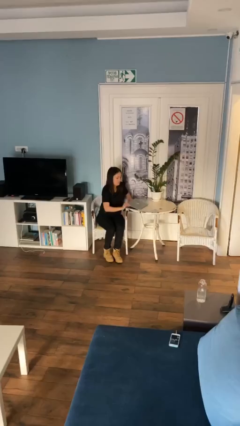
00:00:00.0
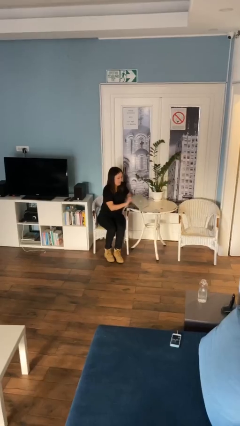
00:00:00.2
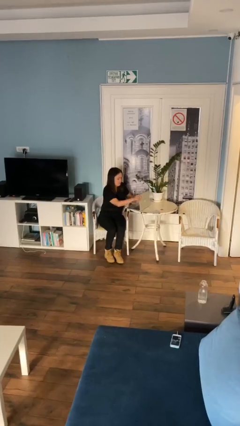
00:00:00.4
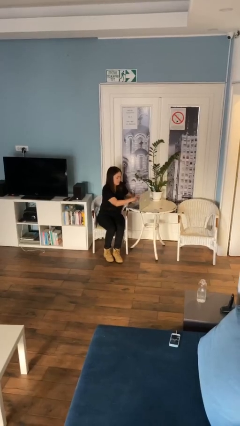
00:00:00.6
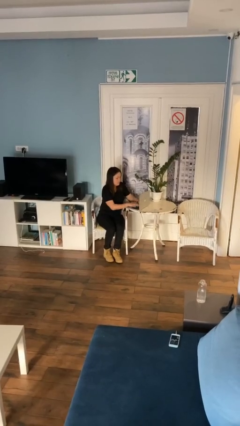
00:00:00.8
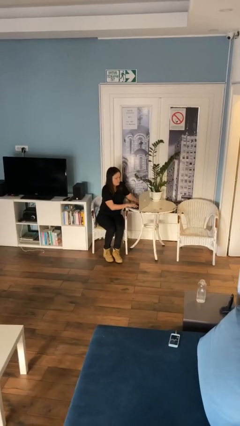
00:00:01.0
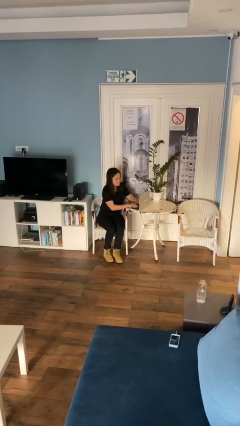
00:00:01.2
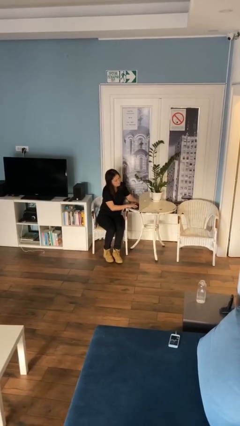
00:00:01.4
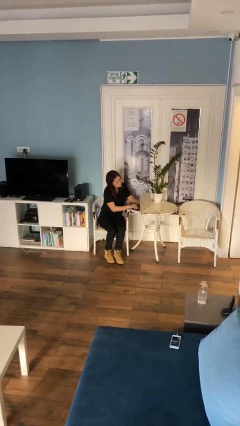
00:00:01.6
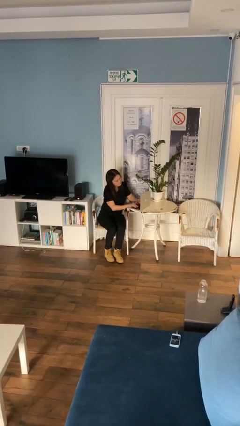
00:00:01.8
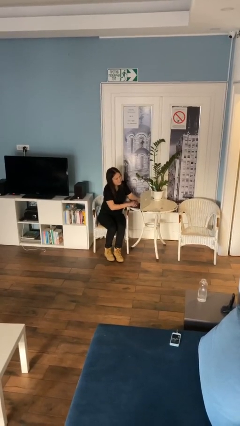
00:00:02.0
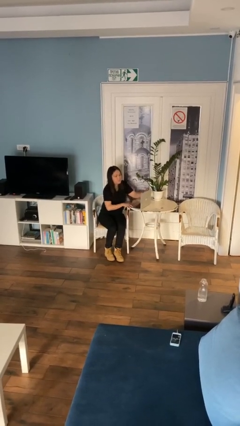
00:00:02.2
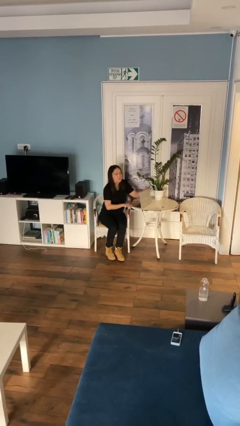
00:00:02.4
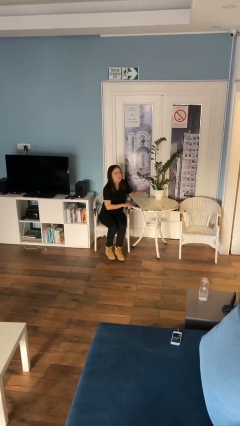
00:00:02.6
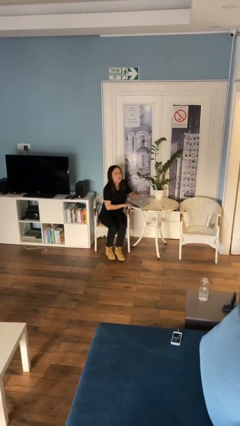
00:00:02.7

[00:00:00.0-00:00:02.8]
person interacts with laptop

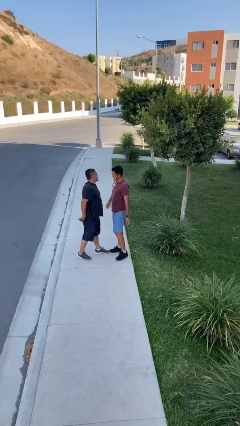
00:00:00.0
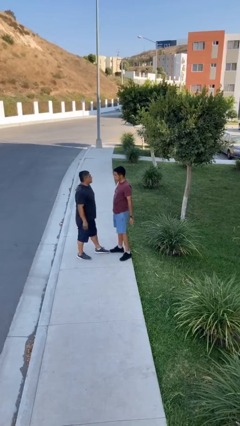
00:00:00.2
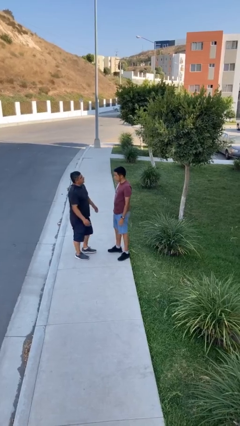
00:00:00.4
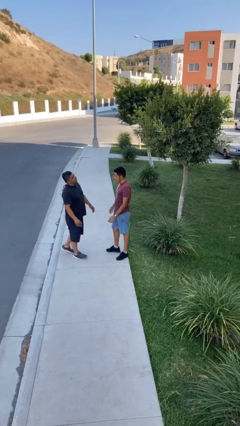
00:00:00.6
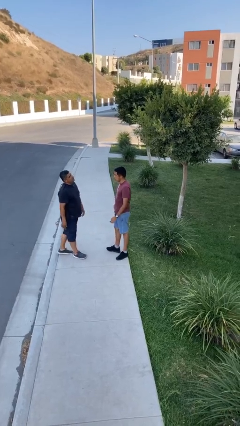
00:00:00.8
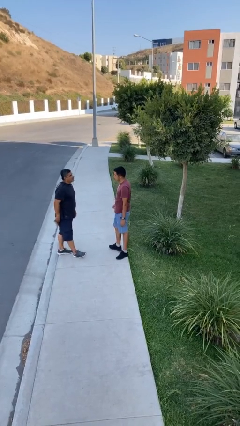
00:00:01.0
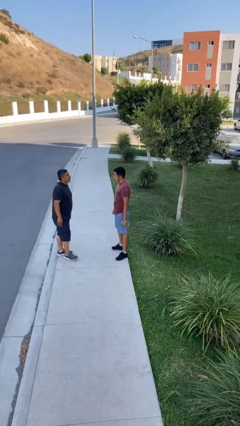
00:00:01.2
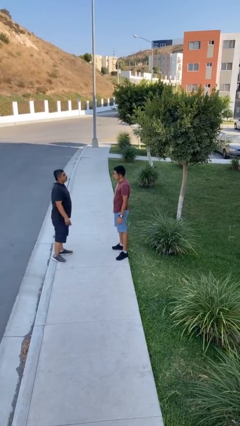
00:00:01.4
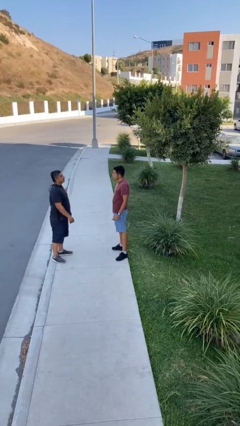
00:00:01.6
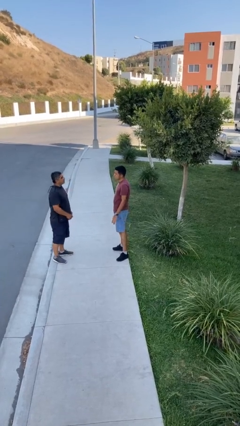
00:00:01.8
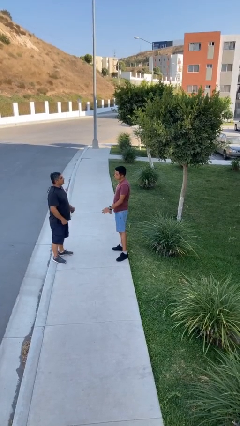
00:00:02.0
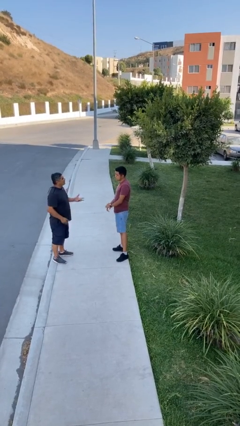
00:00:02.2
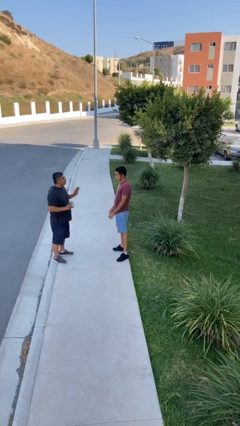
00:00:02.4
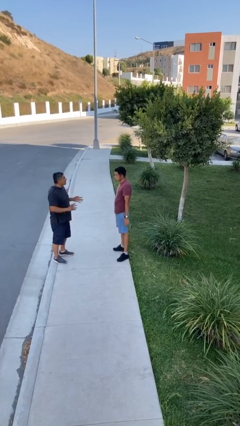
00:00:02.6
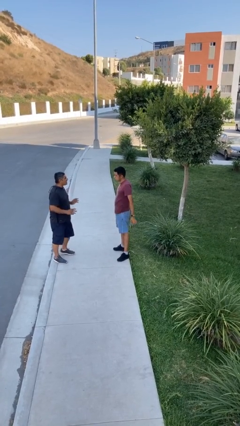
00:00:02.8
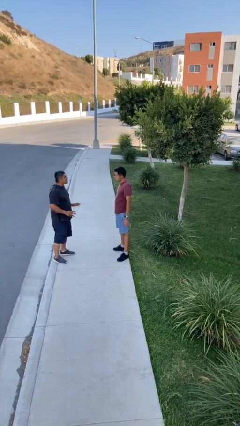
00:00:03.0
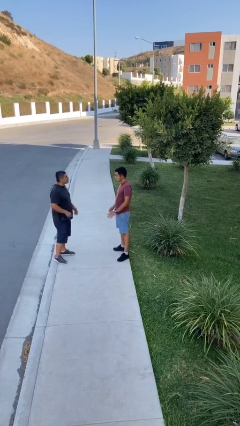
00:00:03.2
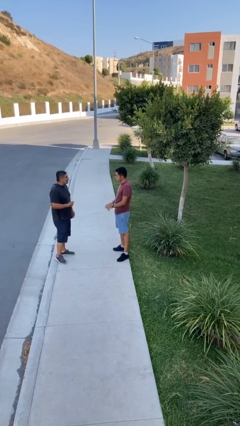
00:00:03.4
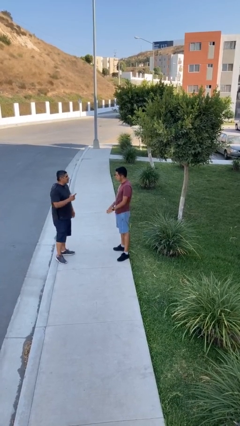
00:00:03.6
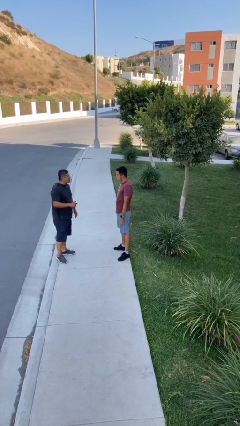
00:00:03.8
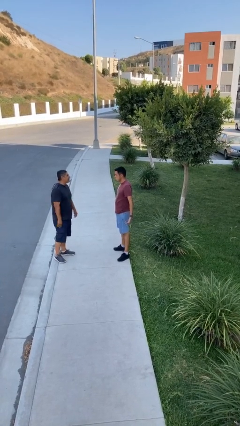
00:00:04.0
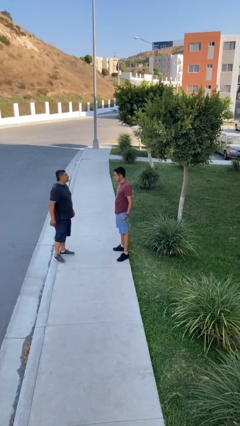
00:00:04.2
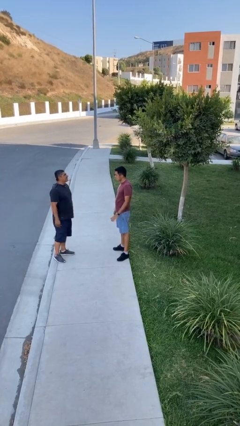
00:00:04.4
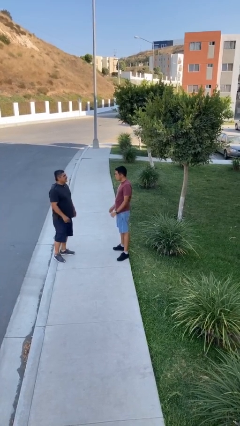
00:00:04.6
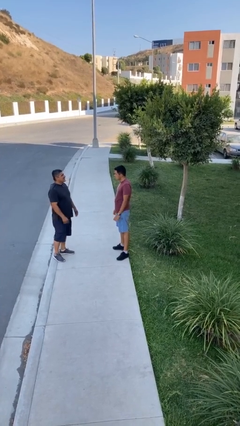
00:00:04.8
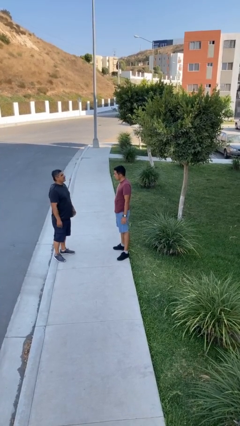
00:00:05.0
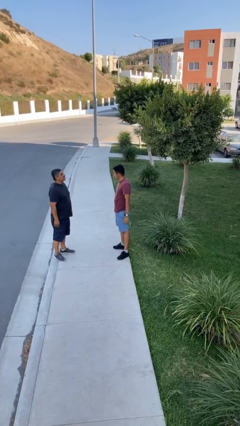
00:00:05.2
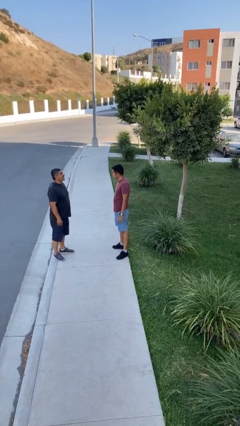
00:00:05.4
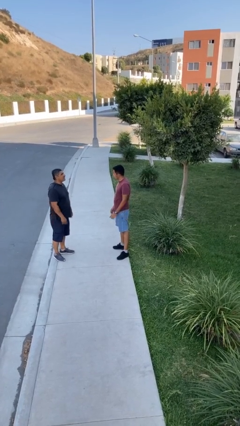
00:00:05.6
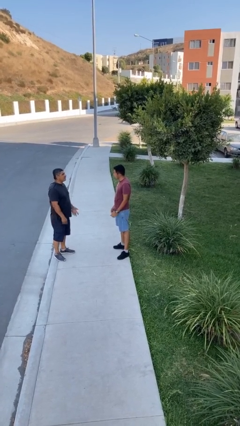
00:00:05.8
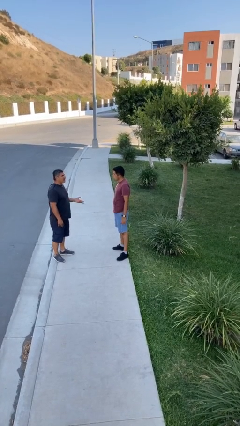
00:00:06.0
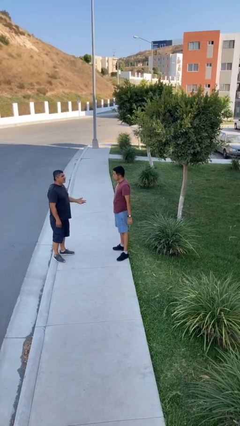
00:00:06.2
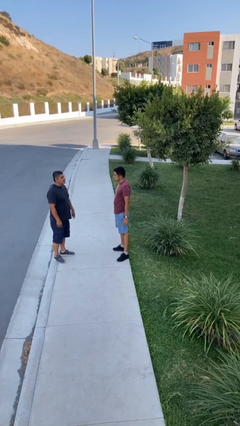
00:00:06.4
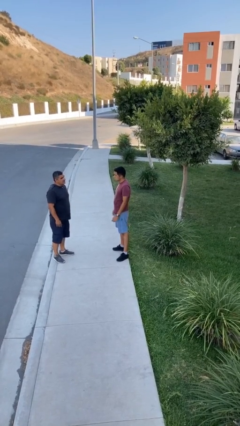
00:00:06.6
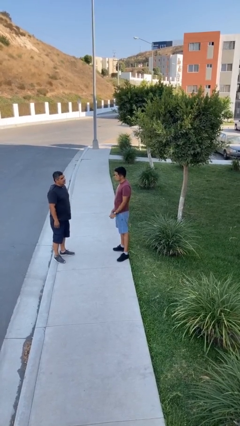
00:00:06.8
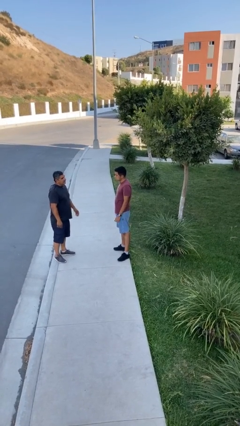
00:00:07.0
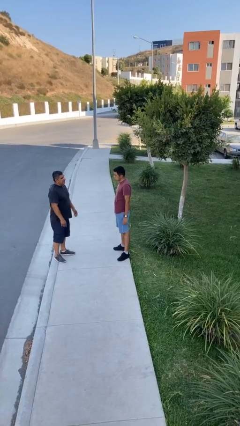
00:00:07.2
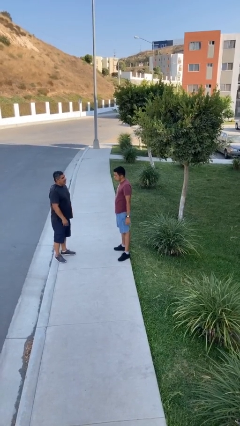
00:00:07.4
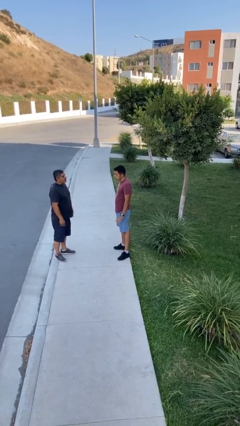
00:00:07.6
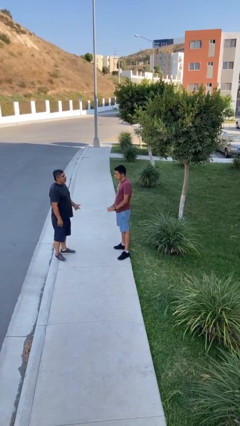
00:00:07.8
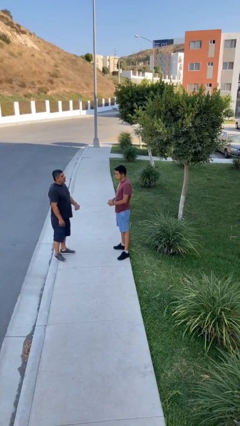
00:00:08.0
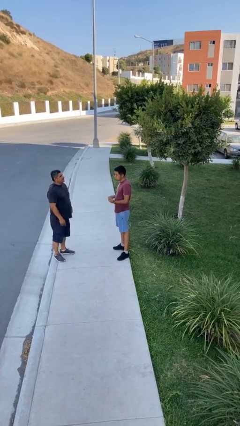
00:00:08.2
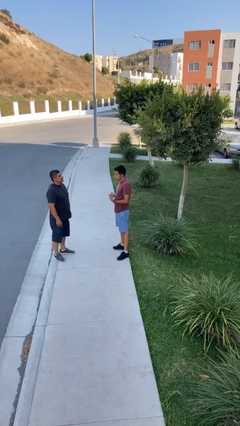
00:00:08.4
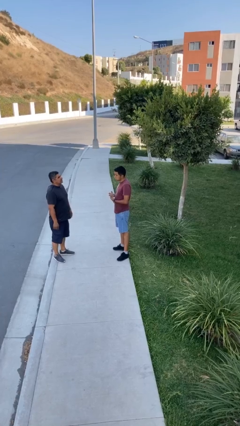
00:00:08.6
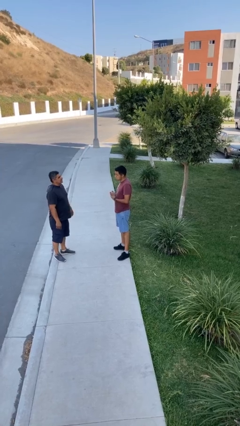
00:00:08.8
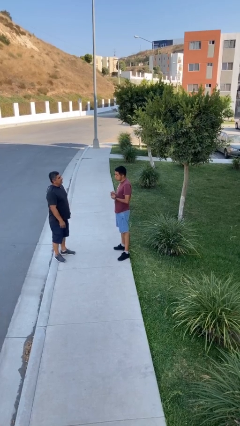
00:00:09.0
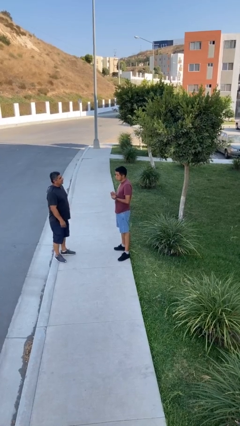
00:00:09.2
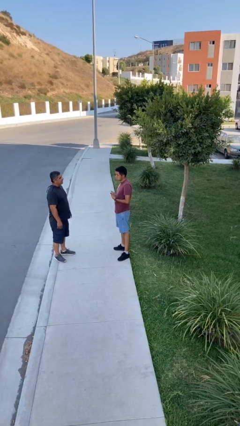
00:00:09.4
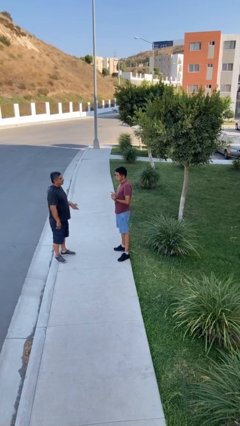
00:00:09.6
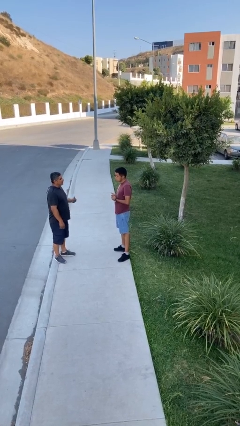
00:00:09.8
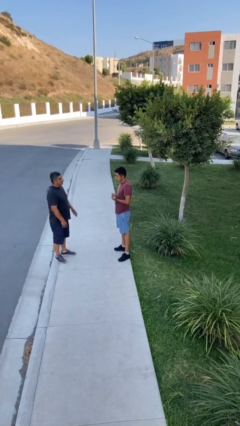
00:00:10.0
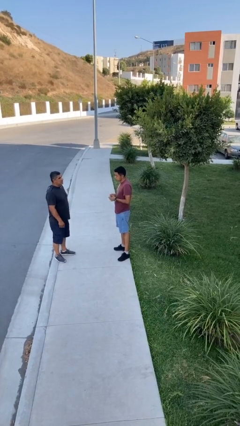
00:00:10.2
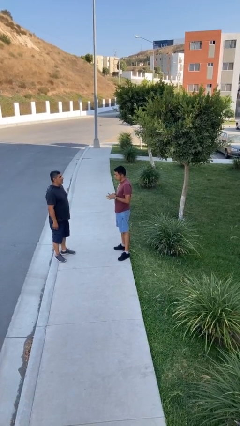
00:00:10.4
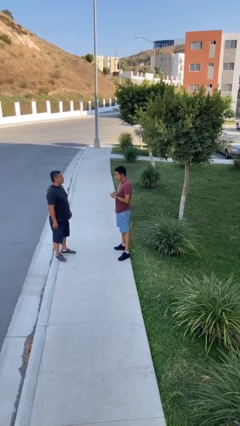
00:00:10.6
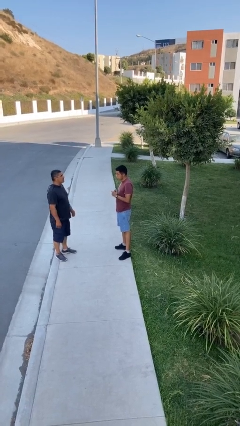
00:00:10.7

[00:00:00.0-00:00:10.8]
person talks to person

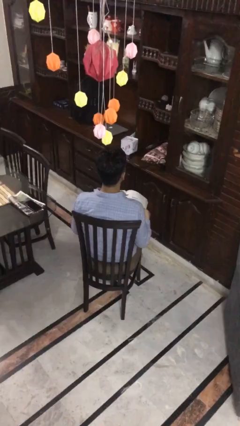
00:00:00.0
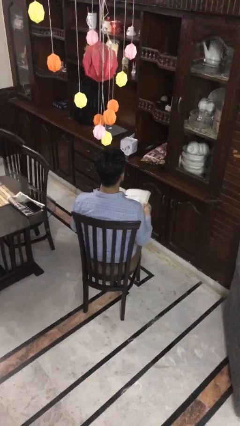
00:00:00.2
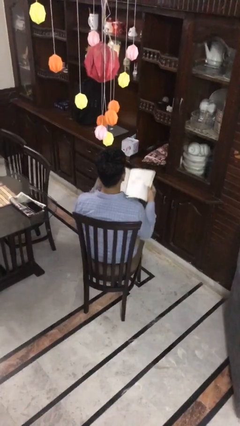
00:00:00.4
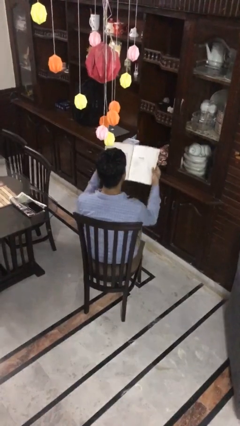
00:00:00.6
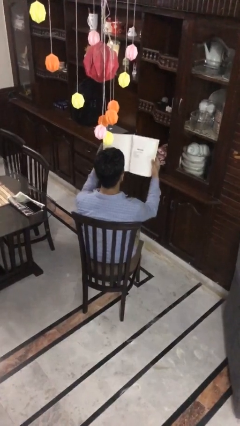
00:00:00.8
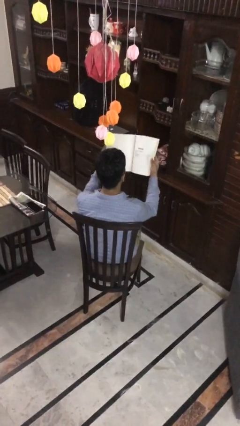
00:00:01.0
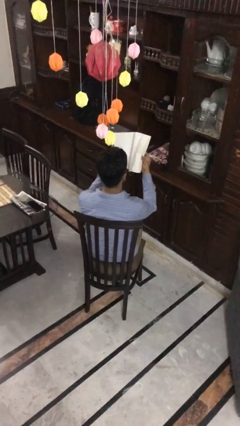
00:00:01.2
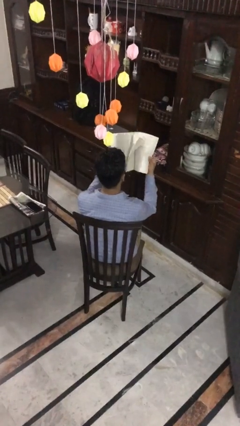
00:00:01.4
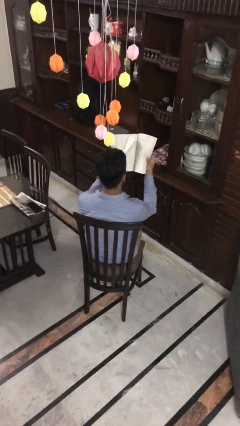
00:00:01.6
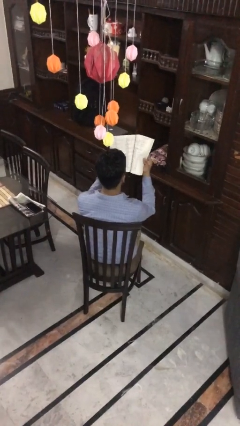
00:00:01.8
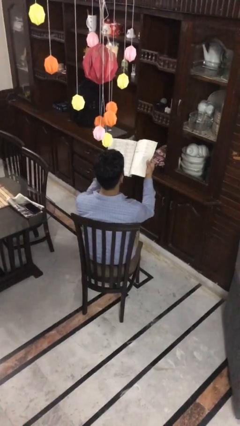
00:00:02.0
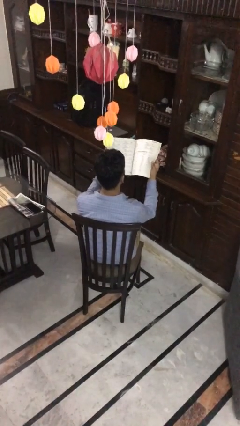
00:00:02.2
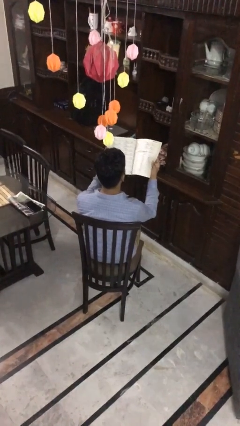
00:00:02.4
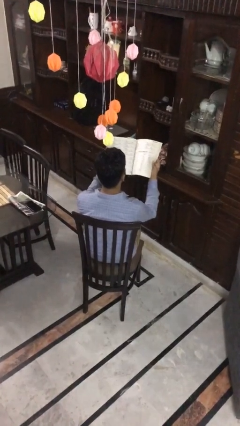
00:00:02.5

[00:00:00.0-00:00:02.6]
person reads magazine

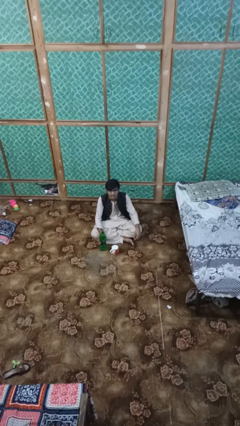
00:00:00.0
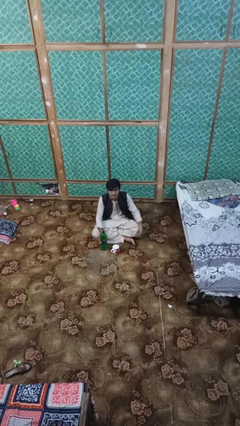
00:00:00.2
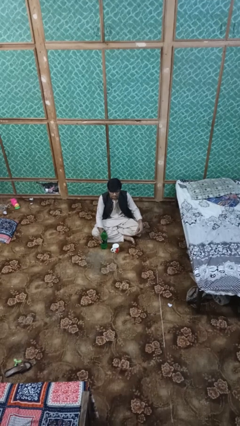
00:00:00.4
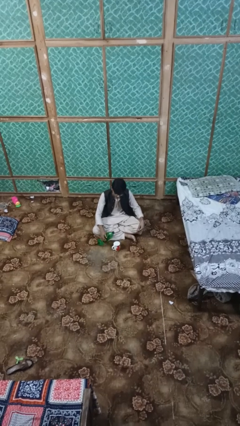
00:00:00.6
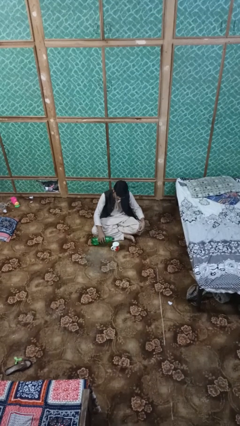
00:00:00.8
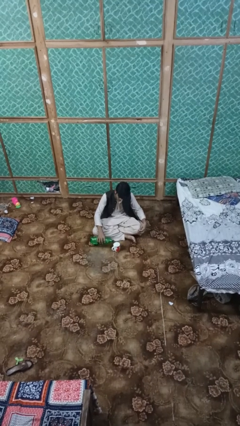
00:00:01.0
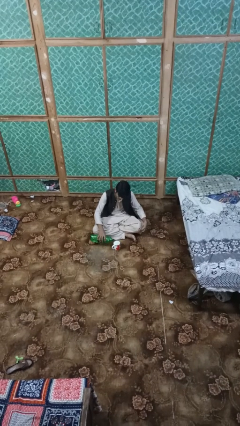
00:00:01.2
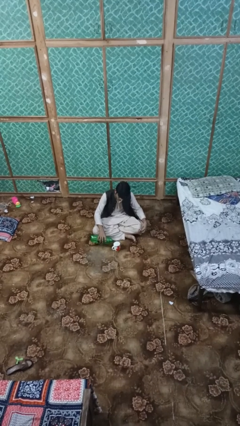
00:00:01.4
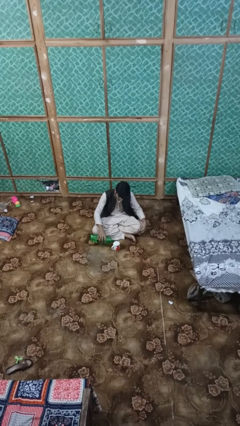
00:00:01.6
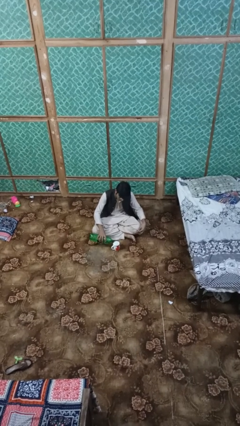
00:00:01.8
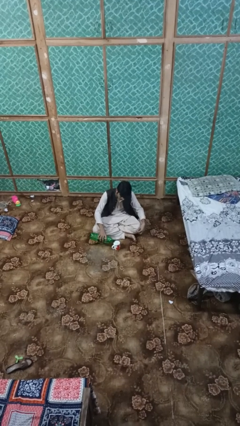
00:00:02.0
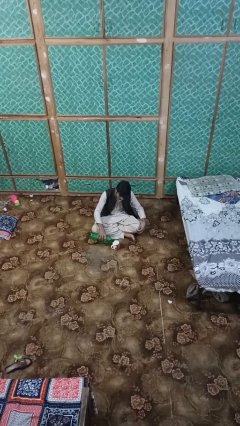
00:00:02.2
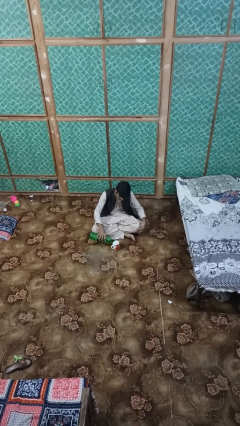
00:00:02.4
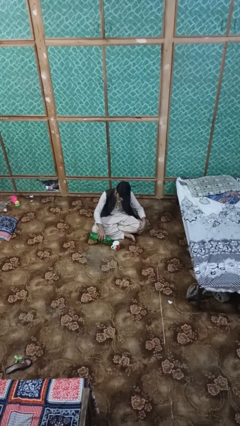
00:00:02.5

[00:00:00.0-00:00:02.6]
person pours liquid into cup
